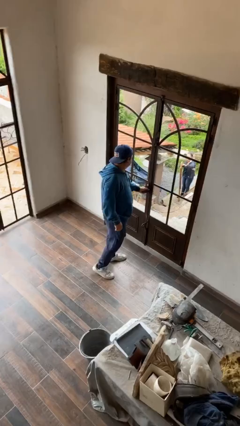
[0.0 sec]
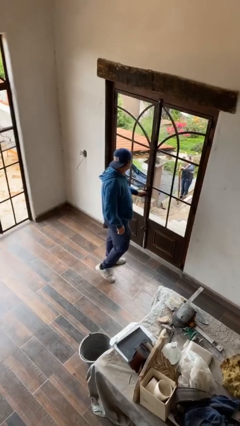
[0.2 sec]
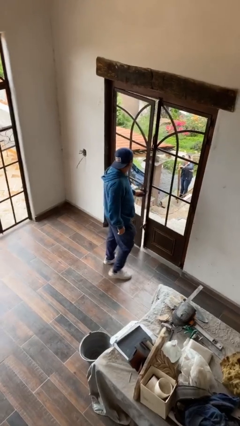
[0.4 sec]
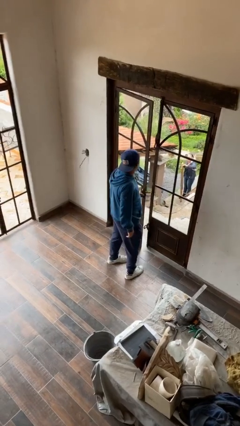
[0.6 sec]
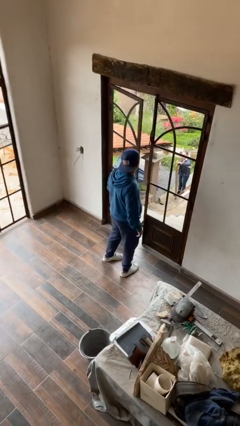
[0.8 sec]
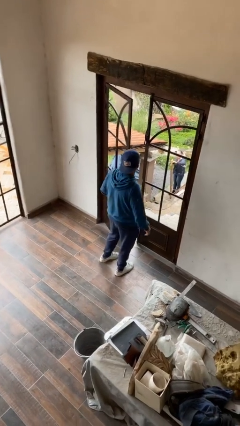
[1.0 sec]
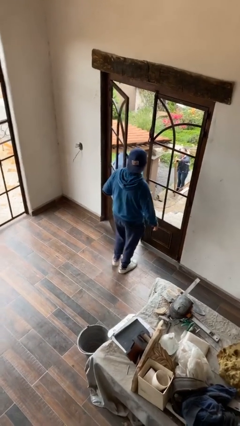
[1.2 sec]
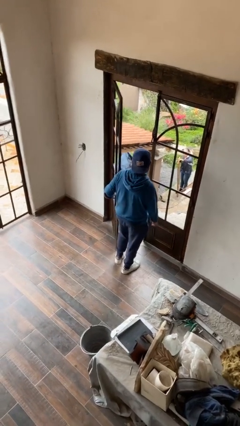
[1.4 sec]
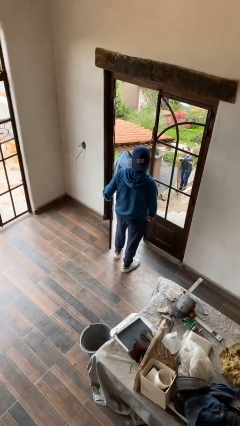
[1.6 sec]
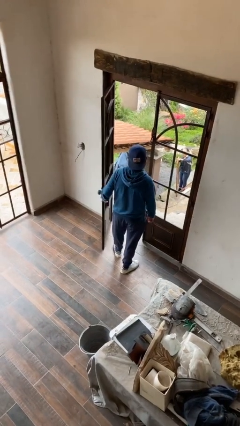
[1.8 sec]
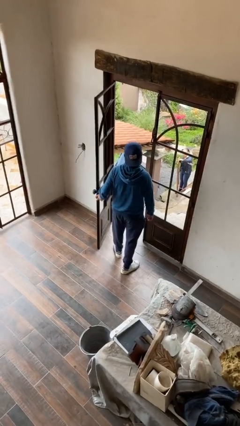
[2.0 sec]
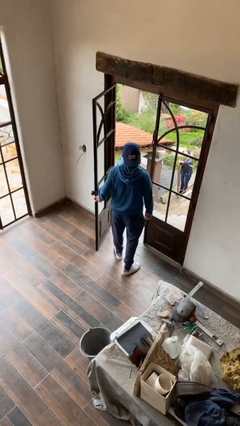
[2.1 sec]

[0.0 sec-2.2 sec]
person opens facility door

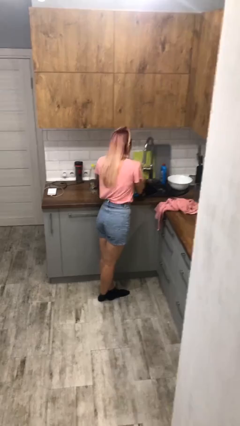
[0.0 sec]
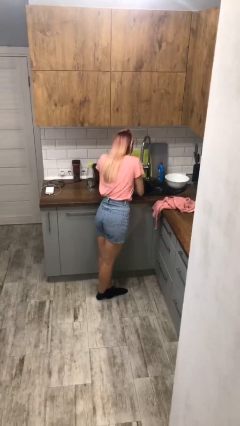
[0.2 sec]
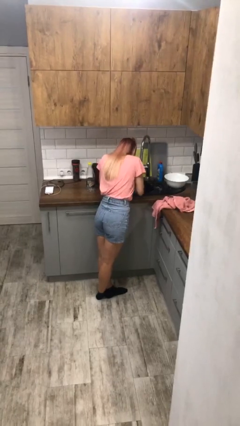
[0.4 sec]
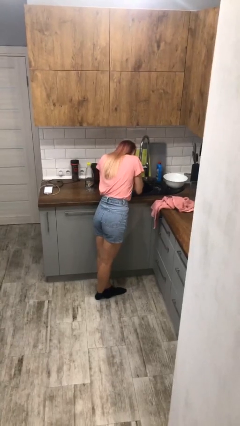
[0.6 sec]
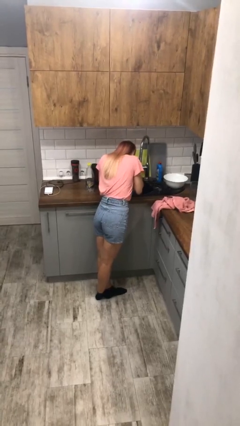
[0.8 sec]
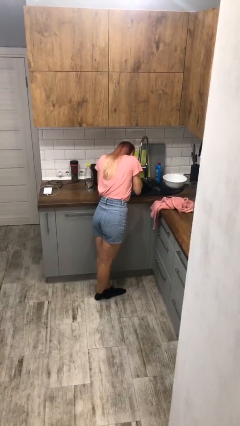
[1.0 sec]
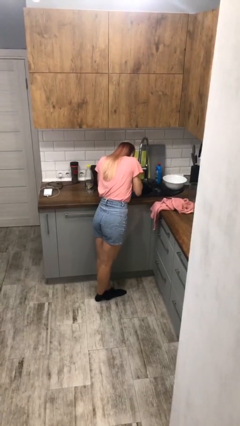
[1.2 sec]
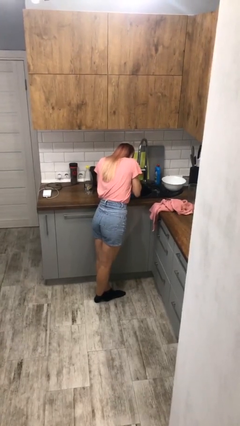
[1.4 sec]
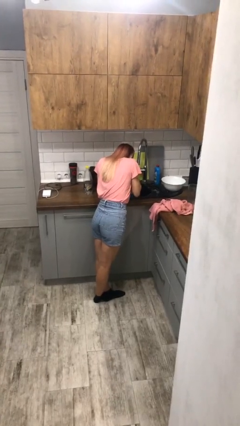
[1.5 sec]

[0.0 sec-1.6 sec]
person washes face

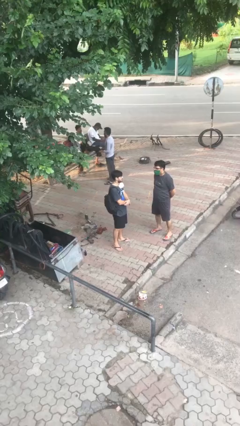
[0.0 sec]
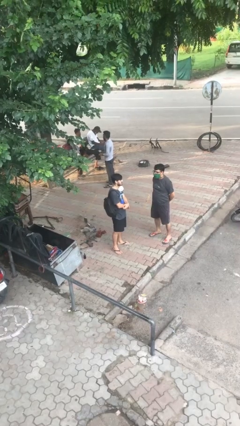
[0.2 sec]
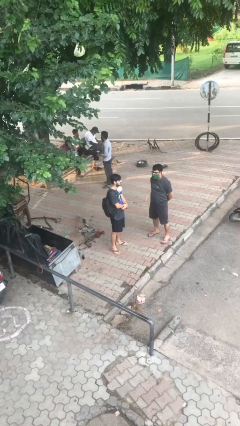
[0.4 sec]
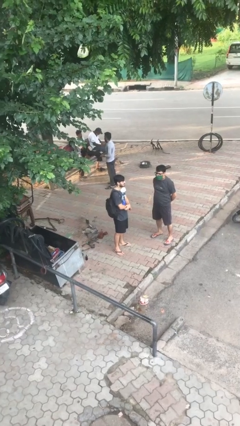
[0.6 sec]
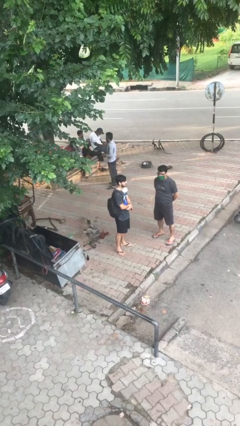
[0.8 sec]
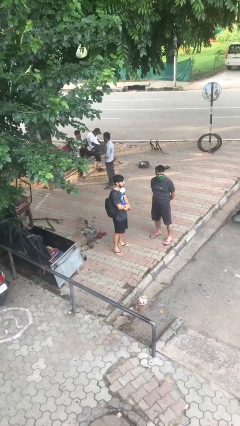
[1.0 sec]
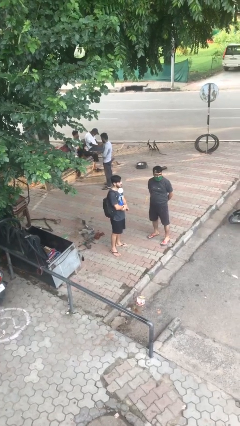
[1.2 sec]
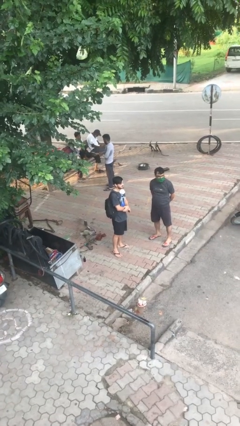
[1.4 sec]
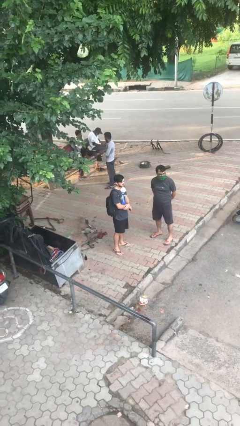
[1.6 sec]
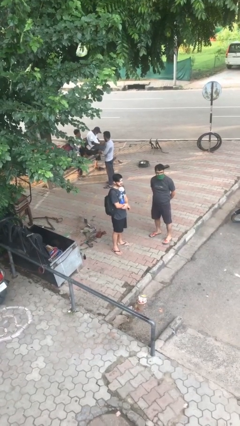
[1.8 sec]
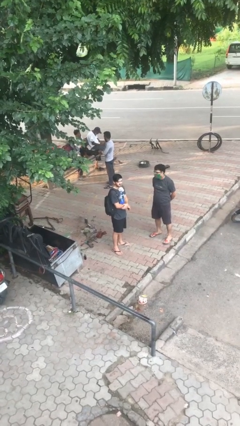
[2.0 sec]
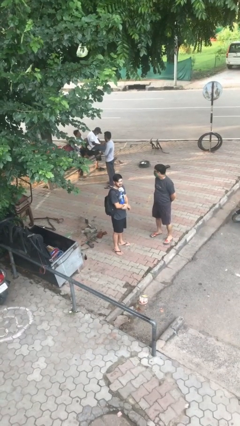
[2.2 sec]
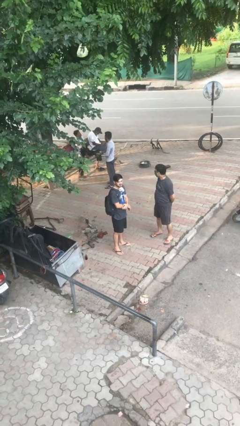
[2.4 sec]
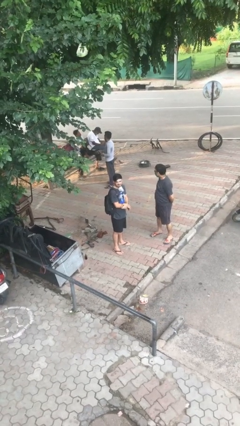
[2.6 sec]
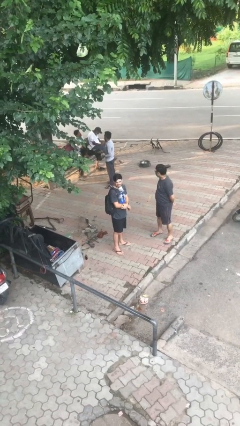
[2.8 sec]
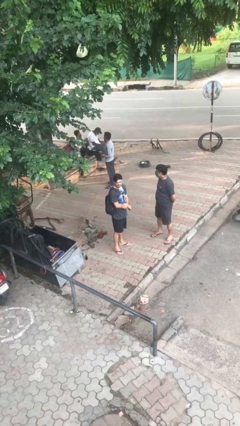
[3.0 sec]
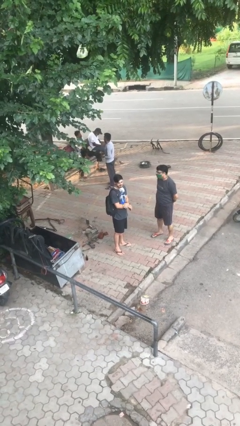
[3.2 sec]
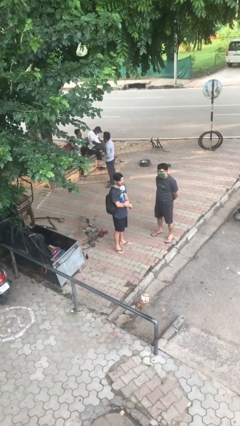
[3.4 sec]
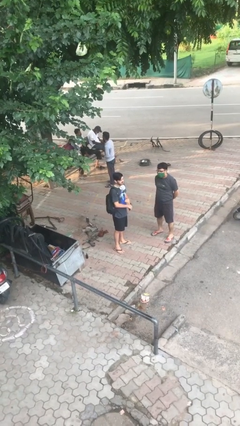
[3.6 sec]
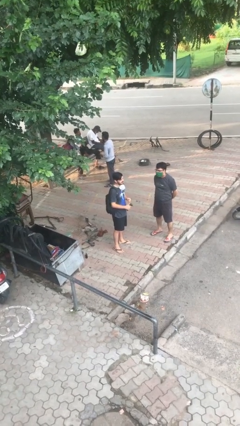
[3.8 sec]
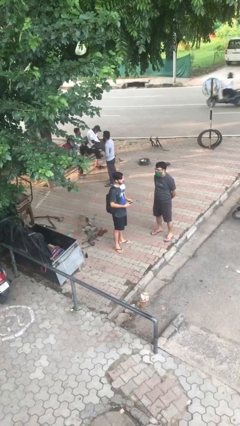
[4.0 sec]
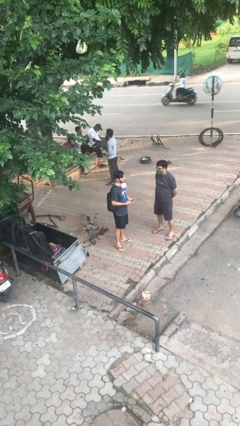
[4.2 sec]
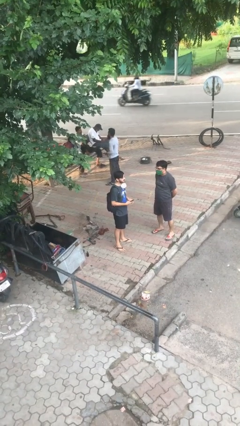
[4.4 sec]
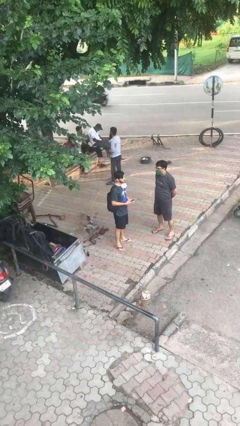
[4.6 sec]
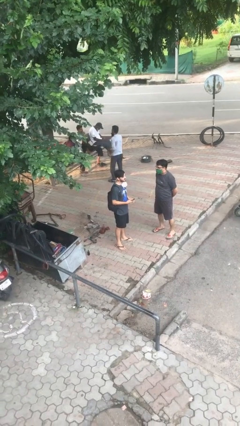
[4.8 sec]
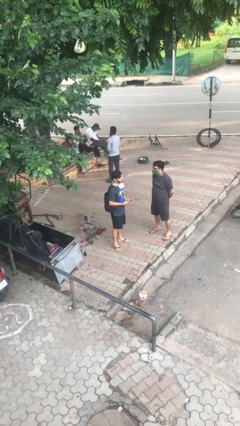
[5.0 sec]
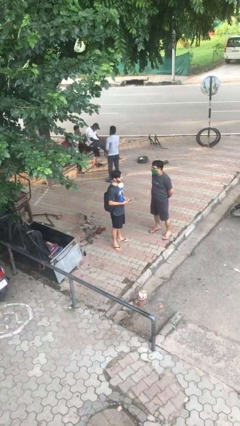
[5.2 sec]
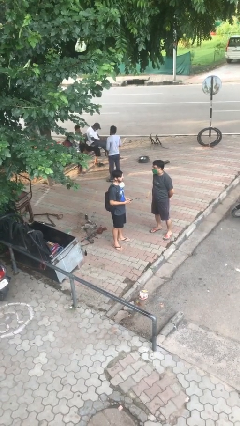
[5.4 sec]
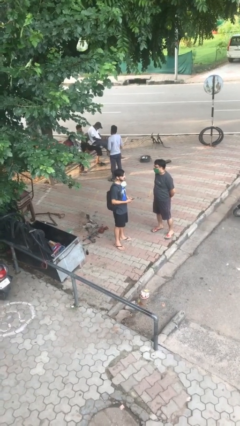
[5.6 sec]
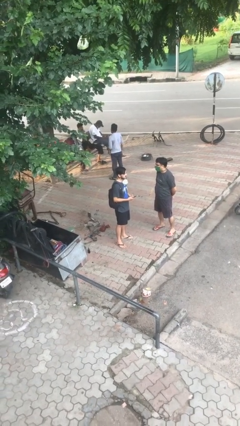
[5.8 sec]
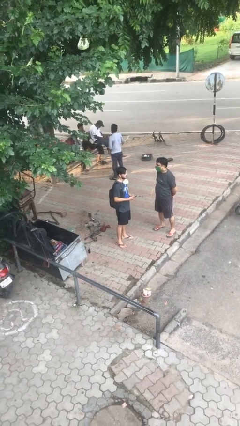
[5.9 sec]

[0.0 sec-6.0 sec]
person talks to person

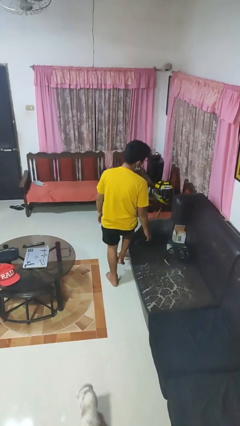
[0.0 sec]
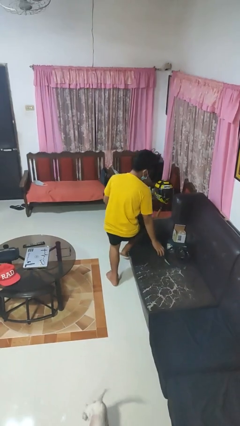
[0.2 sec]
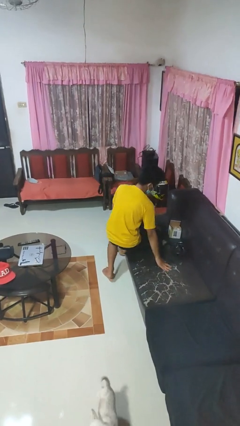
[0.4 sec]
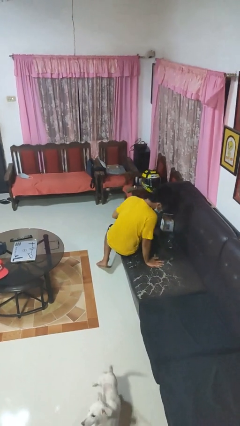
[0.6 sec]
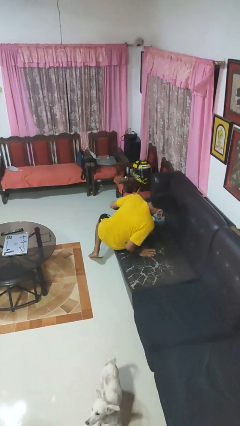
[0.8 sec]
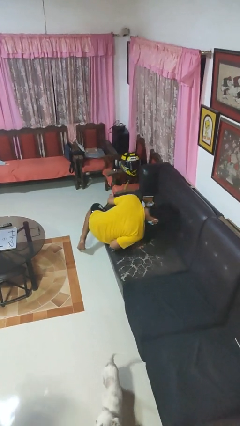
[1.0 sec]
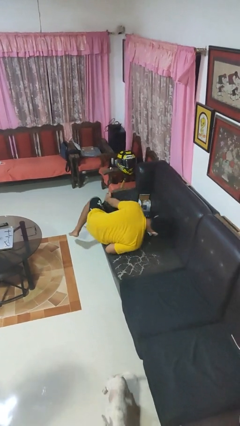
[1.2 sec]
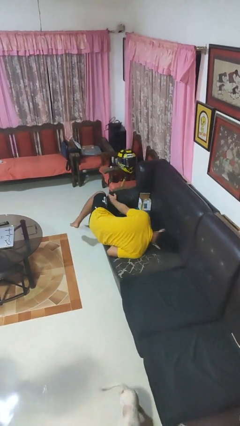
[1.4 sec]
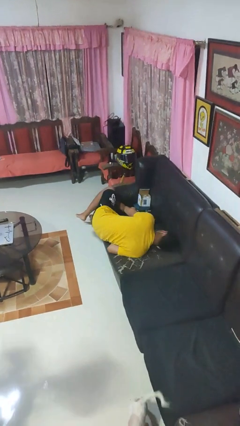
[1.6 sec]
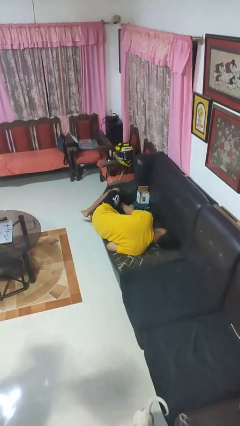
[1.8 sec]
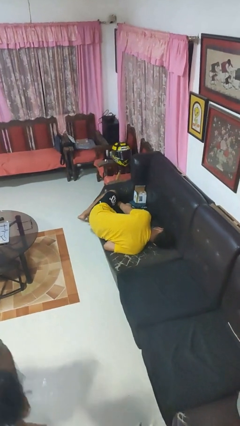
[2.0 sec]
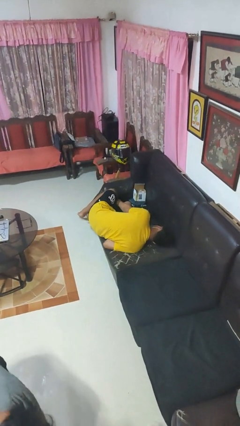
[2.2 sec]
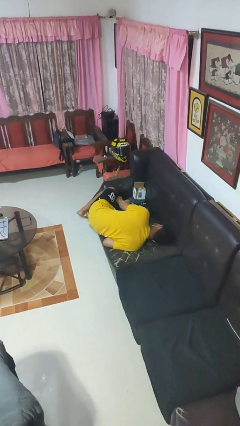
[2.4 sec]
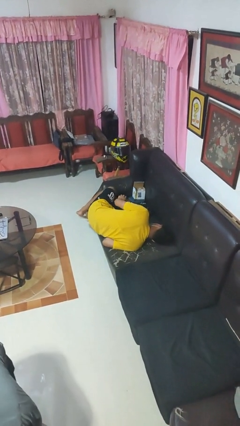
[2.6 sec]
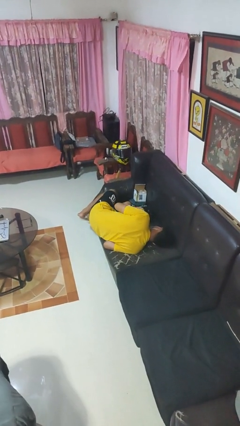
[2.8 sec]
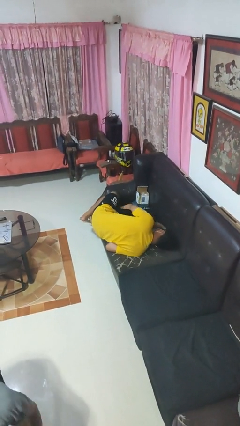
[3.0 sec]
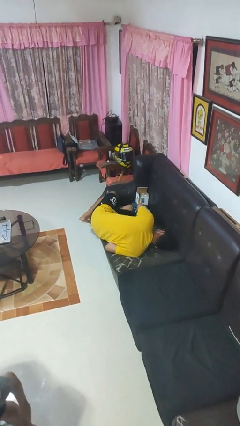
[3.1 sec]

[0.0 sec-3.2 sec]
person lies down on couch

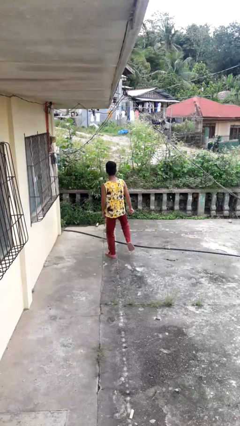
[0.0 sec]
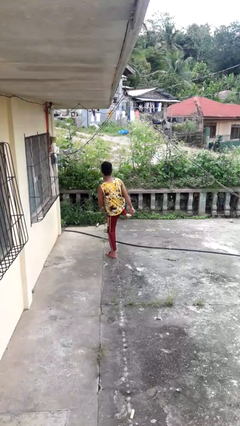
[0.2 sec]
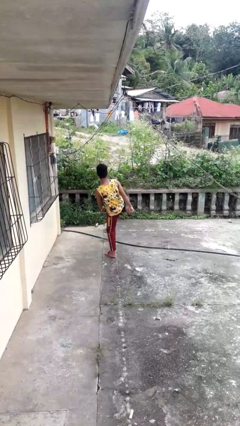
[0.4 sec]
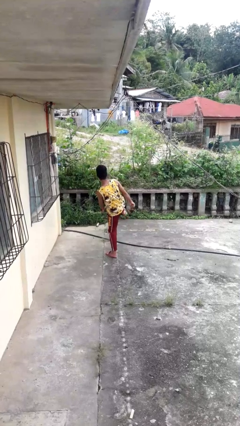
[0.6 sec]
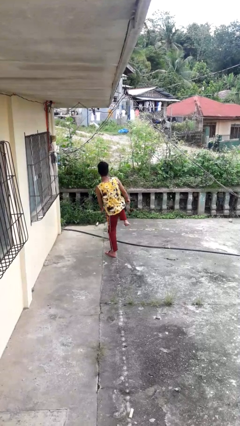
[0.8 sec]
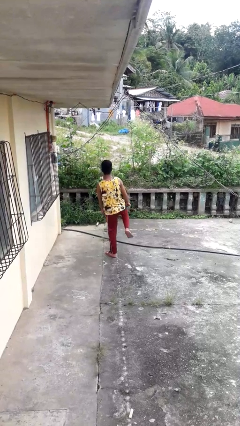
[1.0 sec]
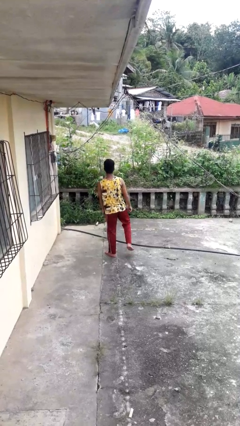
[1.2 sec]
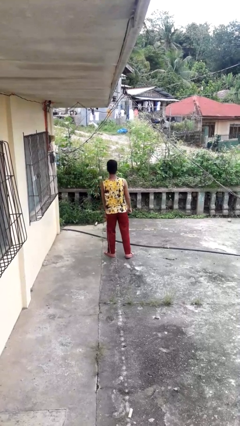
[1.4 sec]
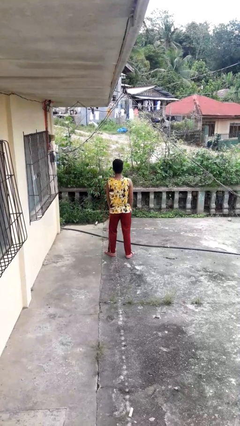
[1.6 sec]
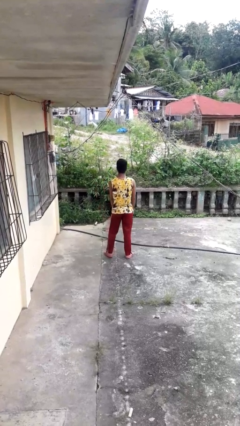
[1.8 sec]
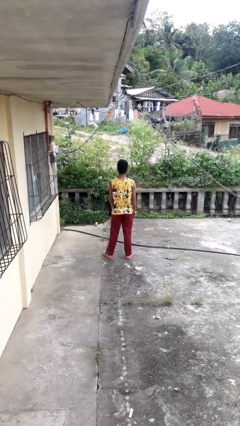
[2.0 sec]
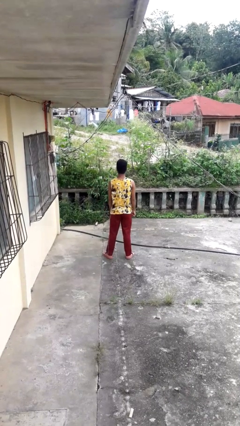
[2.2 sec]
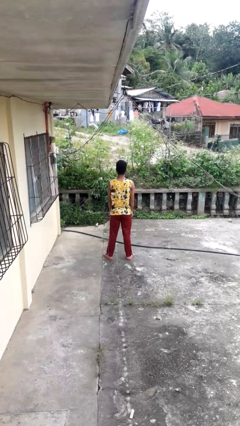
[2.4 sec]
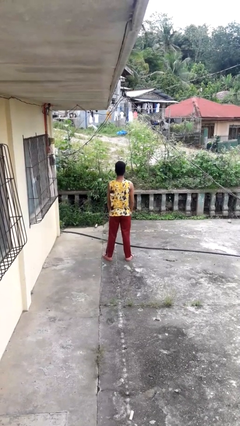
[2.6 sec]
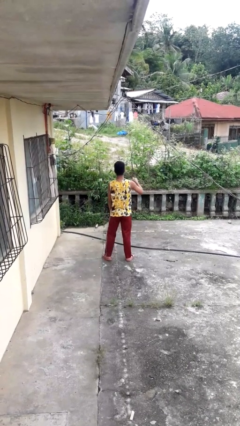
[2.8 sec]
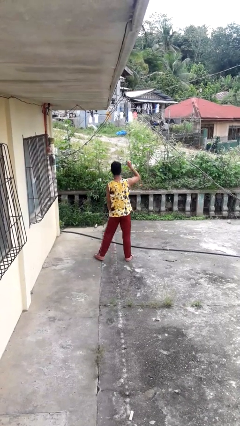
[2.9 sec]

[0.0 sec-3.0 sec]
person karate kicks

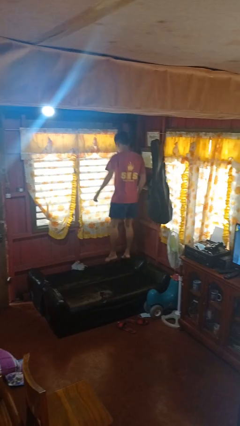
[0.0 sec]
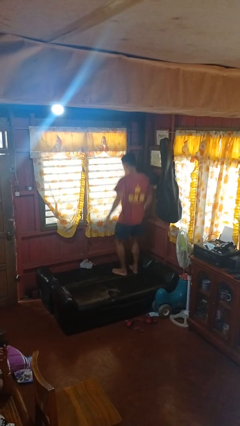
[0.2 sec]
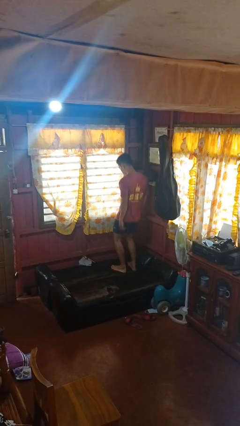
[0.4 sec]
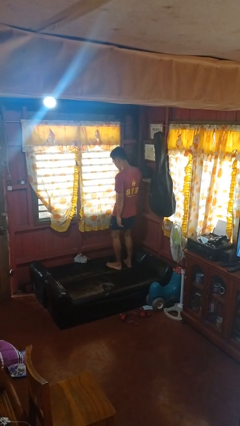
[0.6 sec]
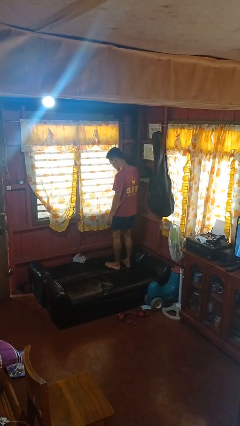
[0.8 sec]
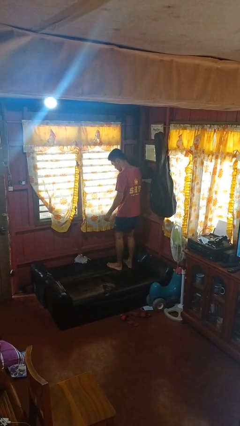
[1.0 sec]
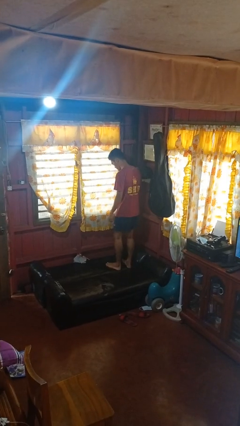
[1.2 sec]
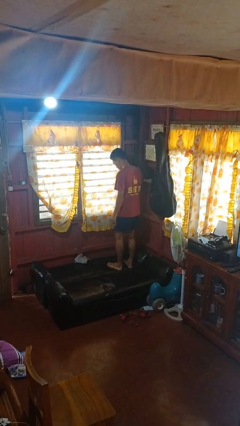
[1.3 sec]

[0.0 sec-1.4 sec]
person jumps on couch

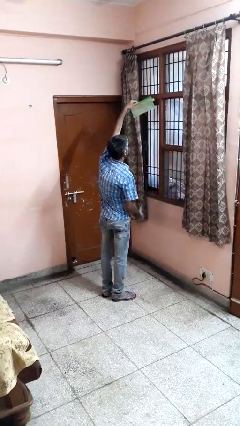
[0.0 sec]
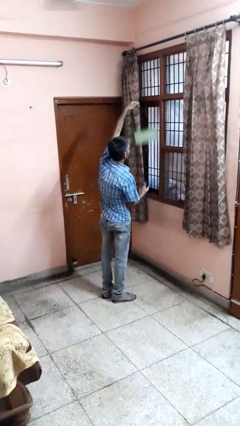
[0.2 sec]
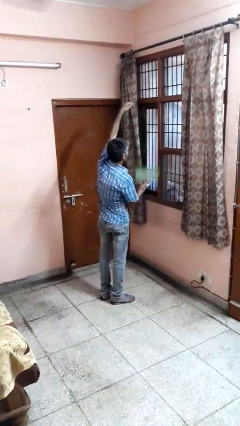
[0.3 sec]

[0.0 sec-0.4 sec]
person drops object
